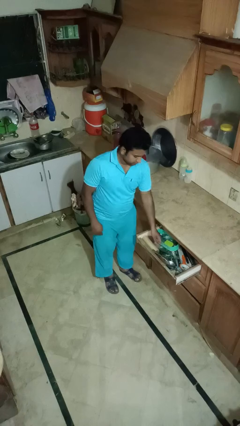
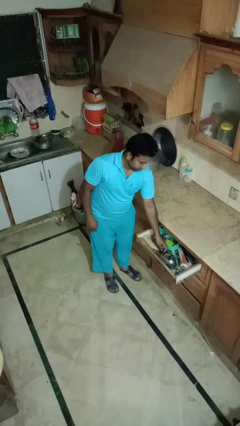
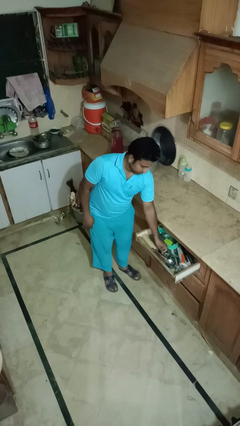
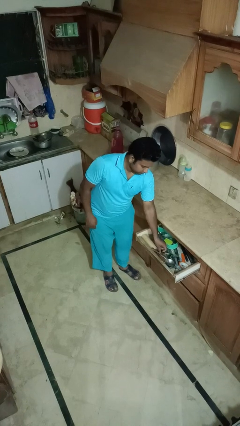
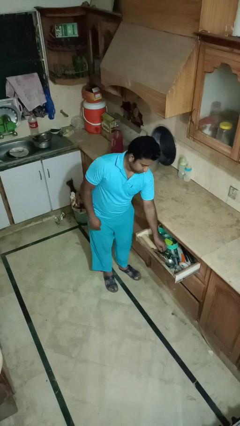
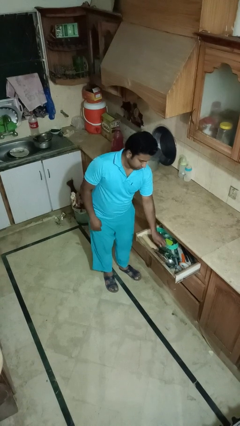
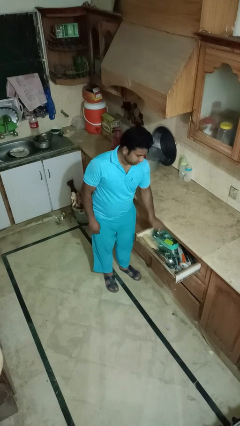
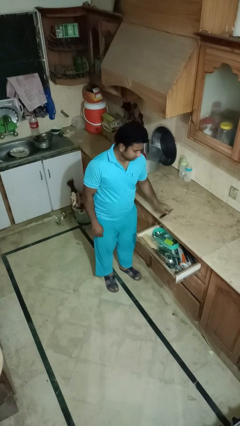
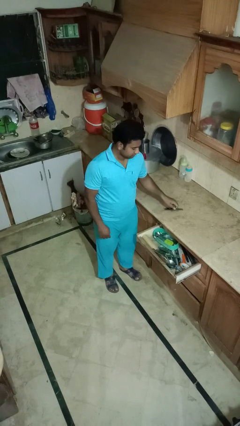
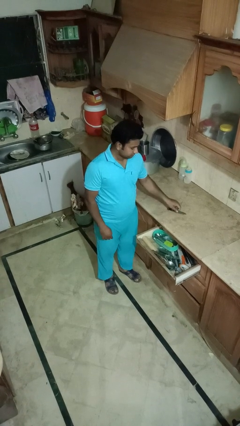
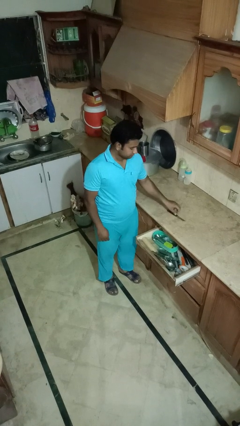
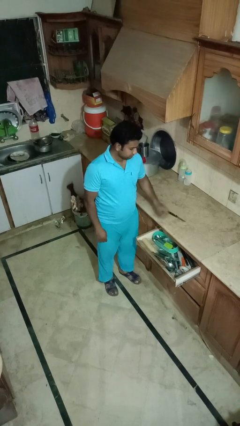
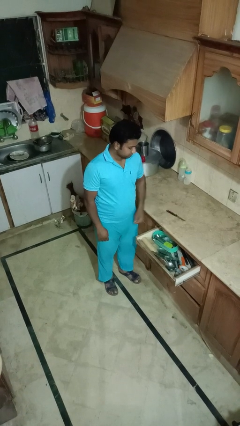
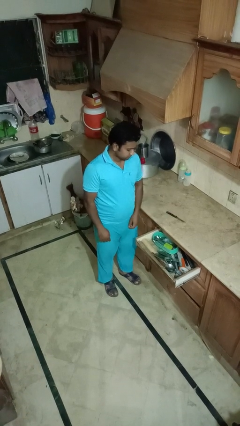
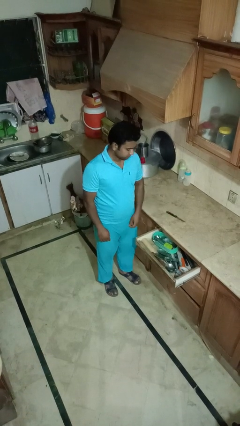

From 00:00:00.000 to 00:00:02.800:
person takes object from kitchen drawer

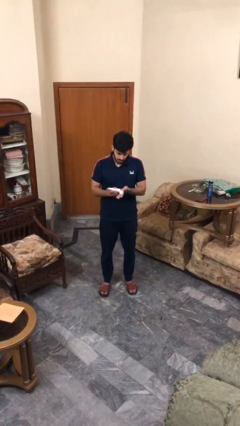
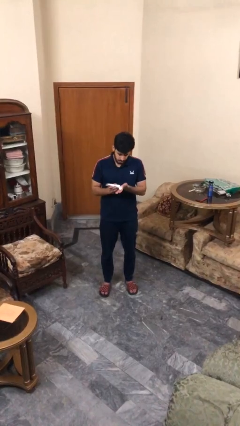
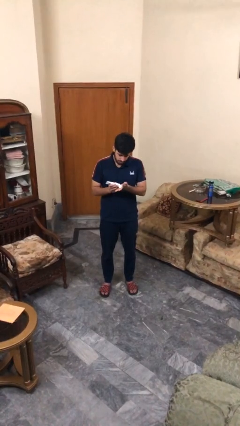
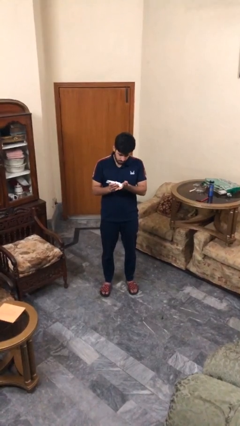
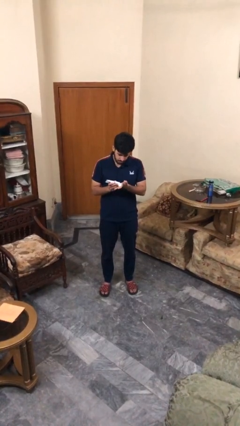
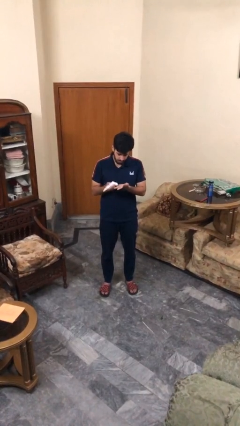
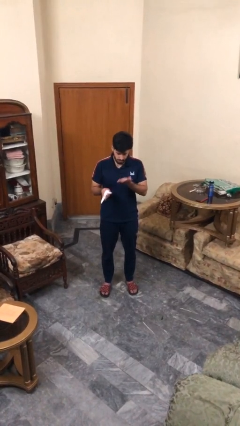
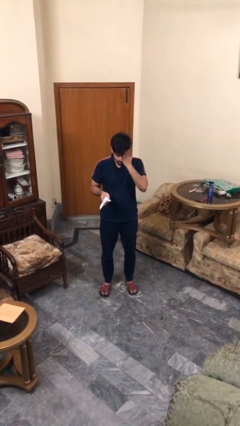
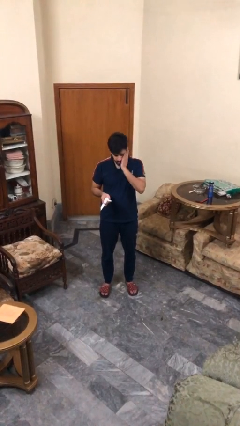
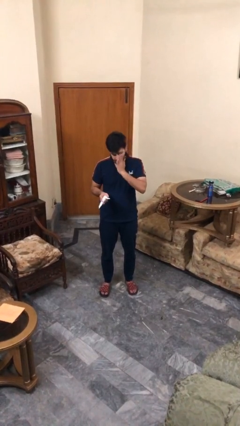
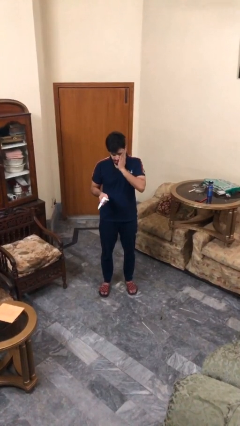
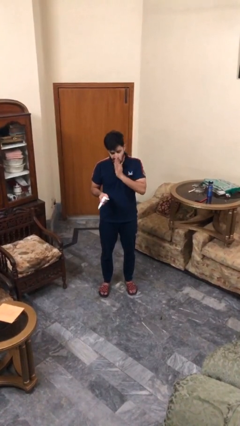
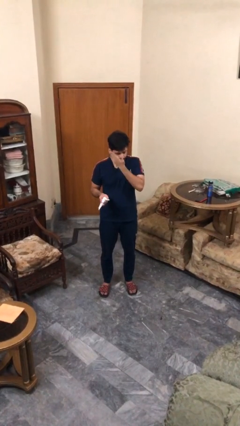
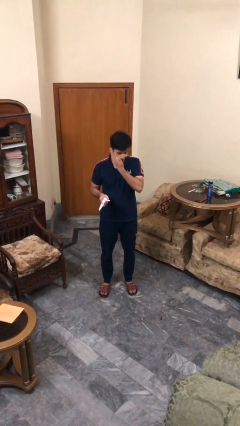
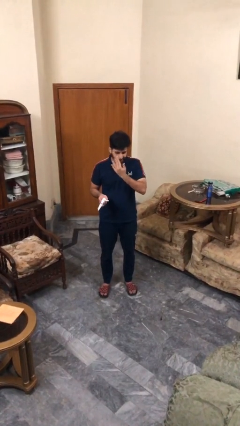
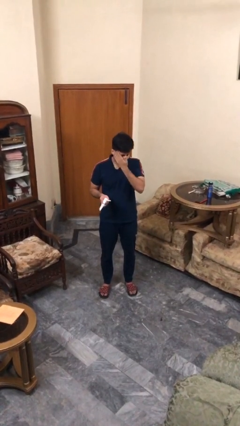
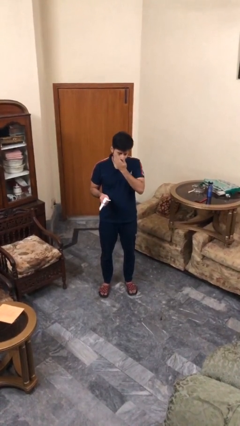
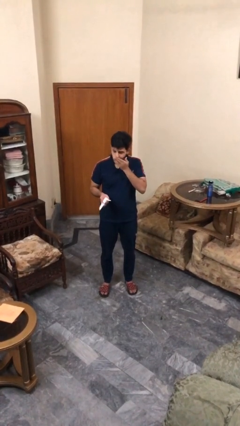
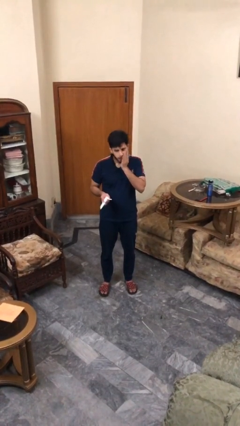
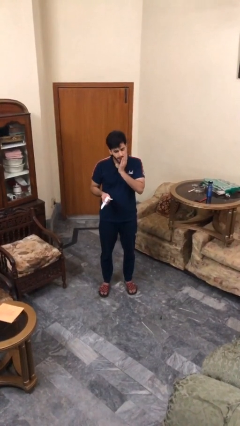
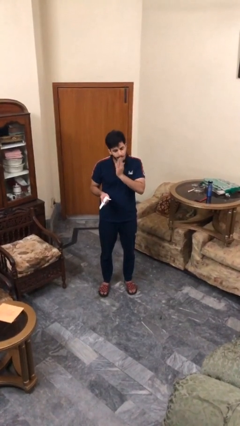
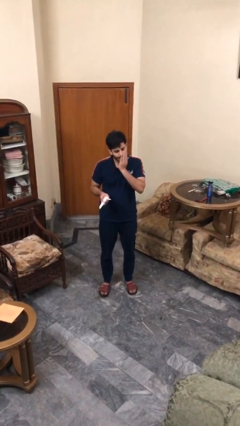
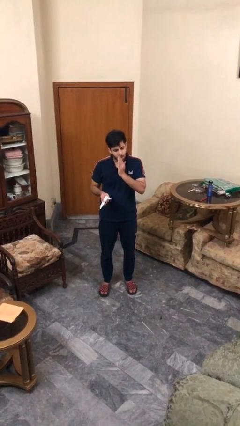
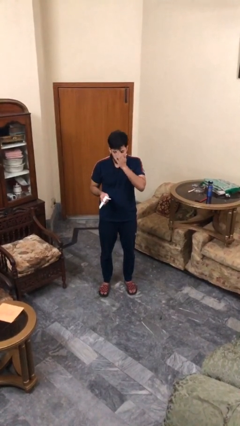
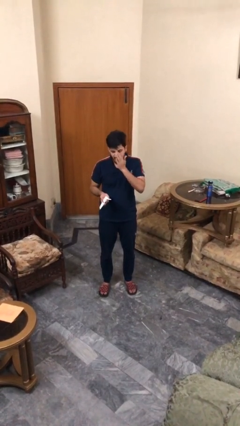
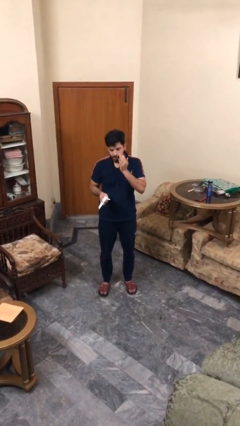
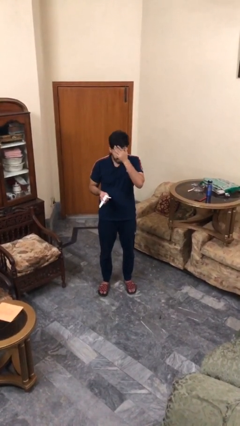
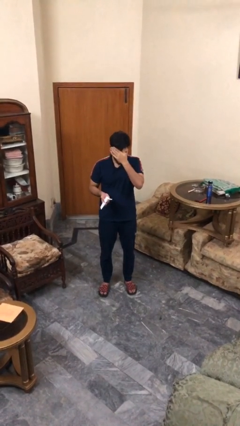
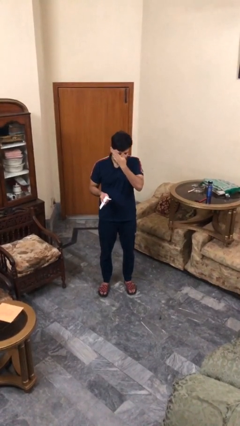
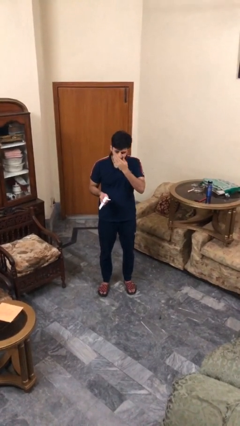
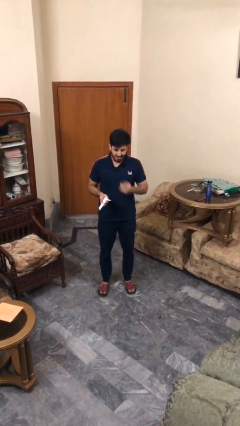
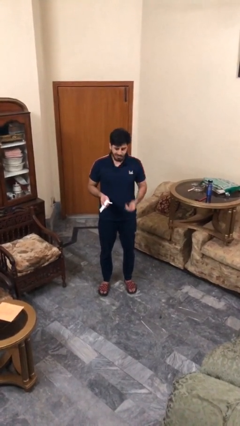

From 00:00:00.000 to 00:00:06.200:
person applies facial moisturizer

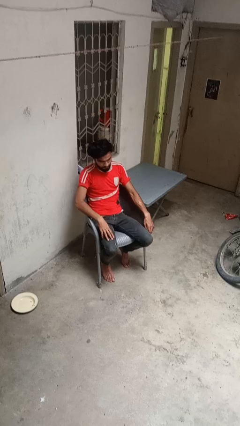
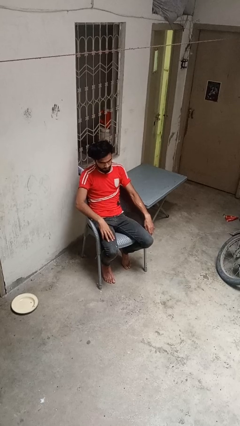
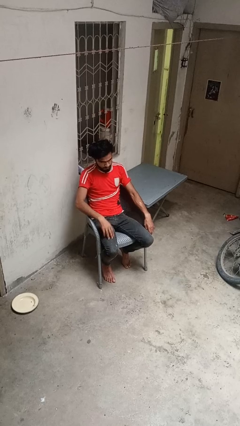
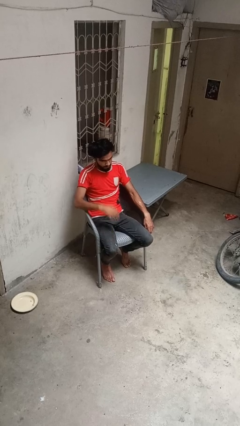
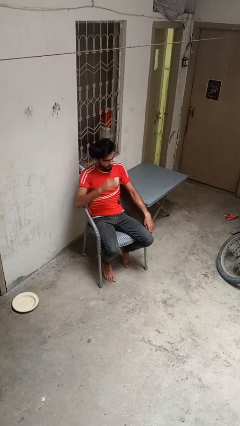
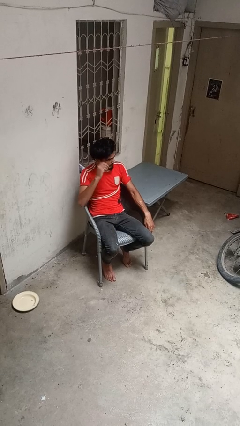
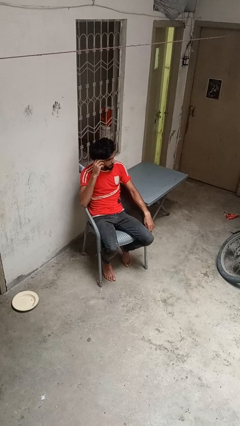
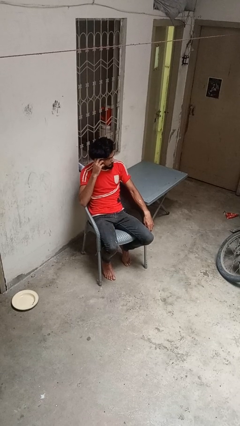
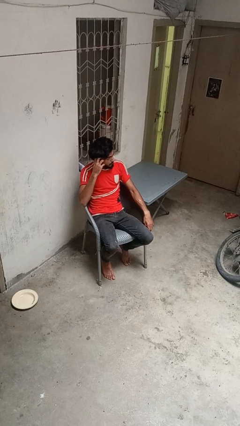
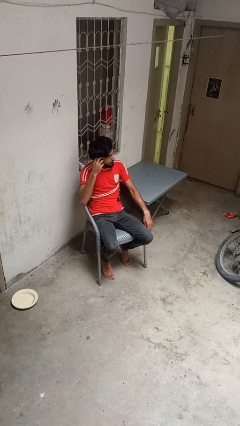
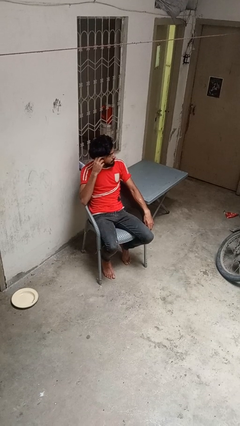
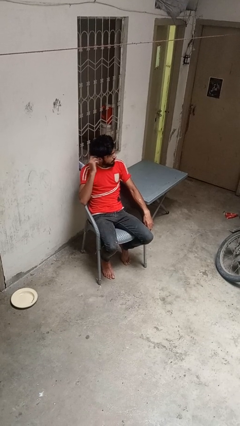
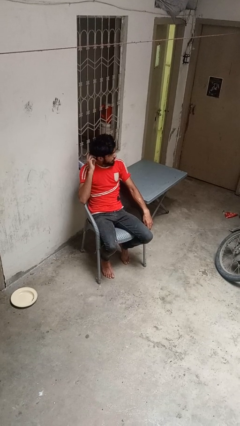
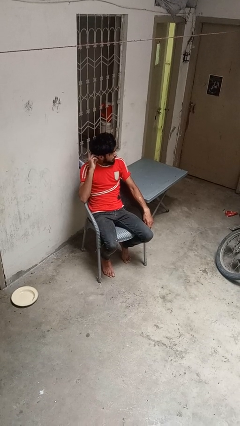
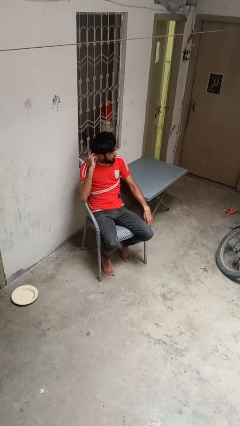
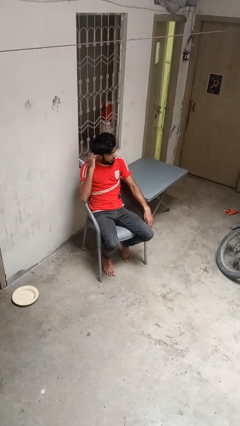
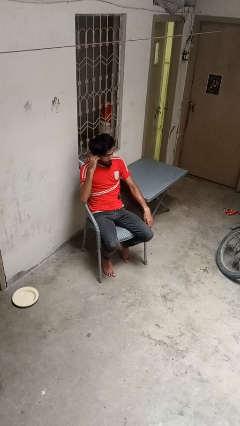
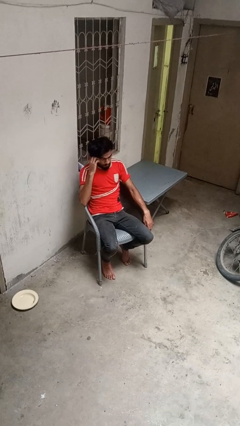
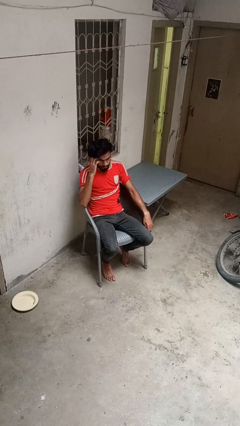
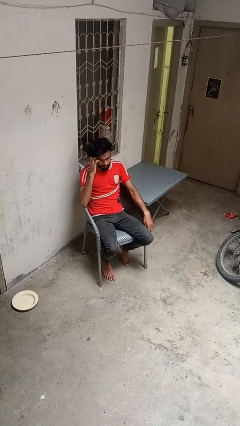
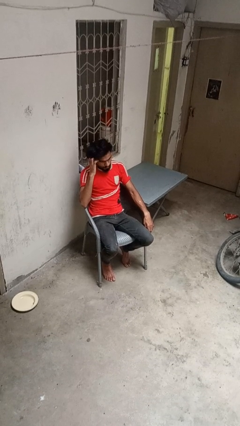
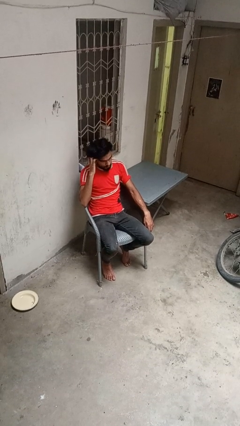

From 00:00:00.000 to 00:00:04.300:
person strokes hair

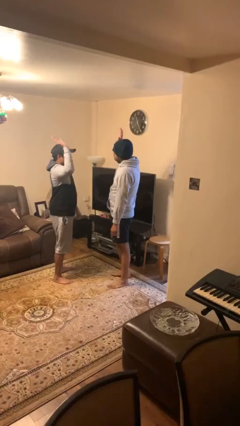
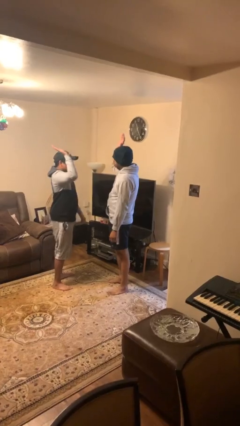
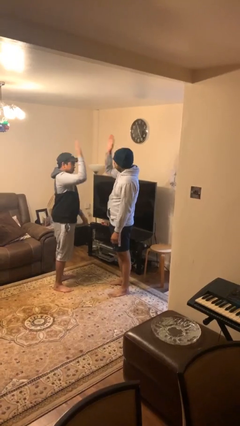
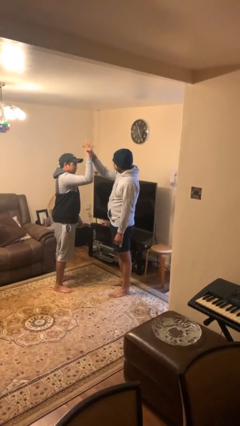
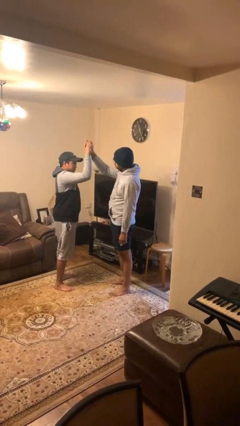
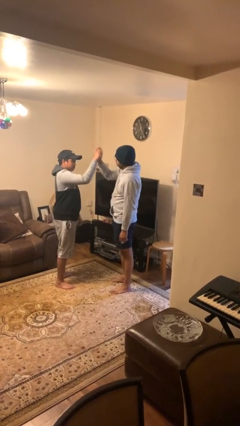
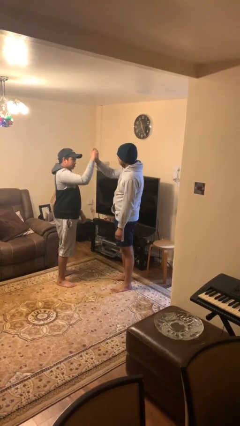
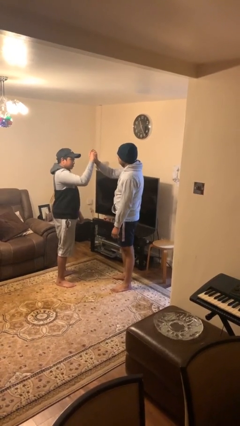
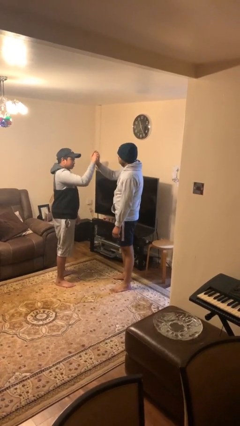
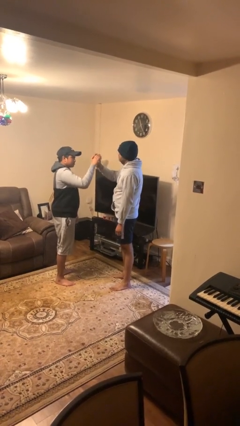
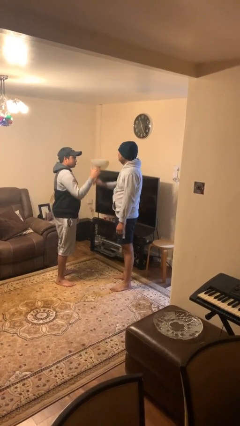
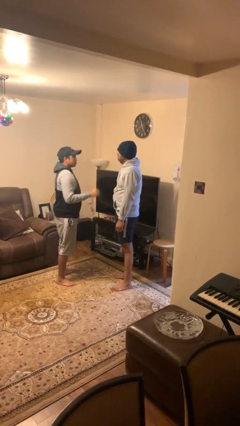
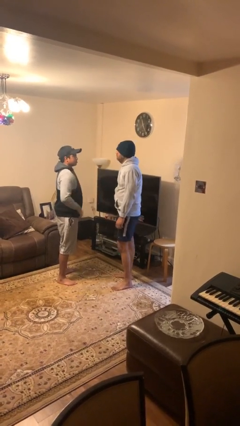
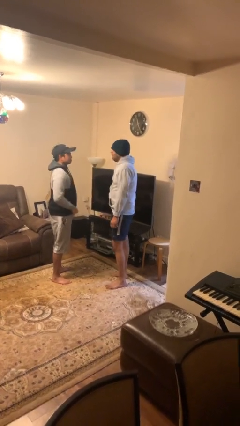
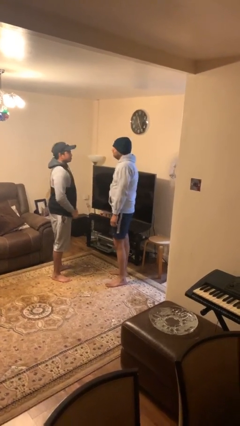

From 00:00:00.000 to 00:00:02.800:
person highfives hand

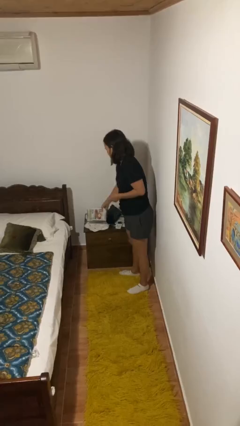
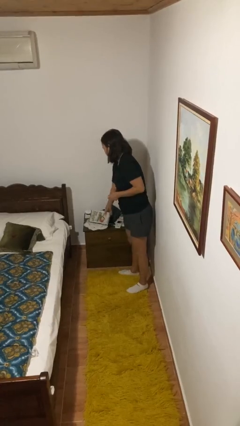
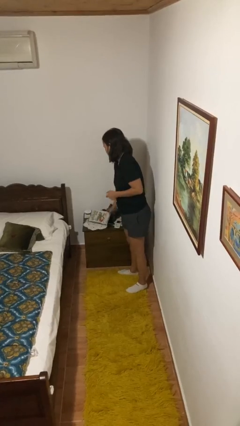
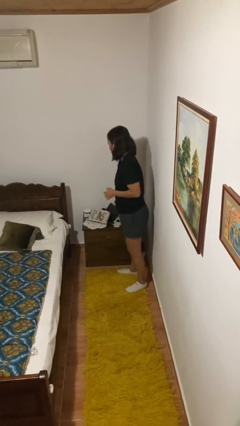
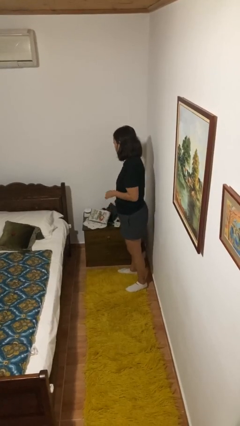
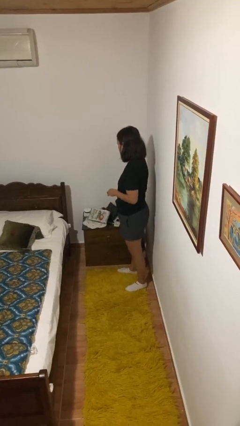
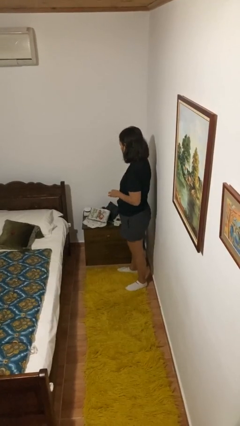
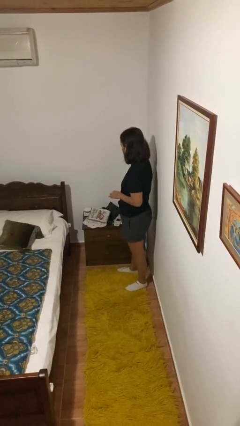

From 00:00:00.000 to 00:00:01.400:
person puts down object on countertop
